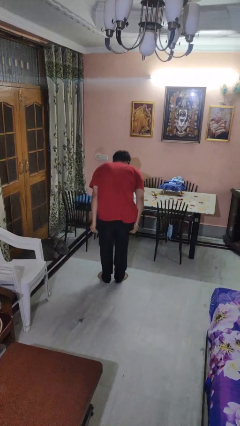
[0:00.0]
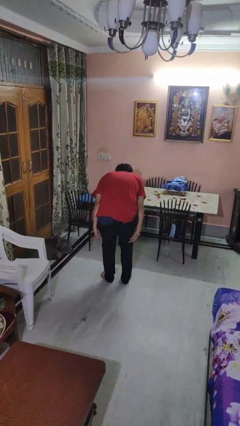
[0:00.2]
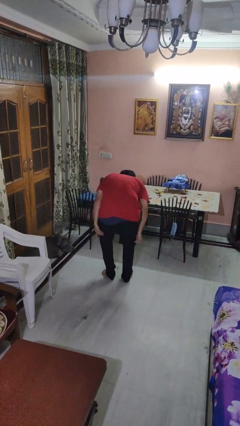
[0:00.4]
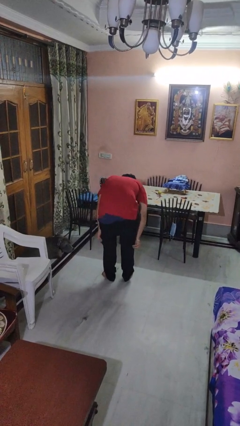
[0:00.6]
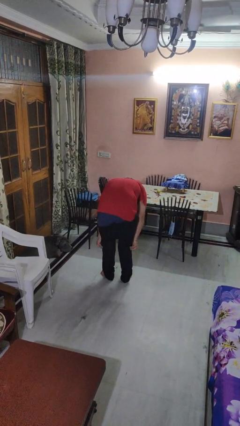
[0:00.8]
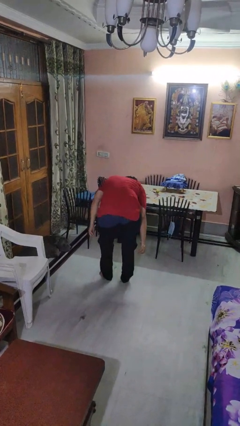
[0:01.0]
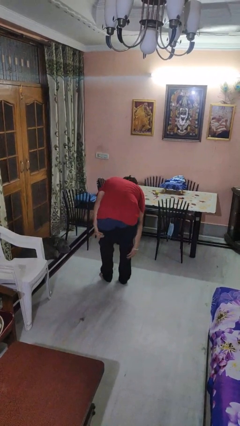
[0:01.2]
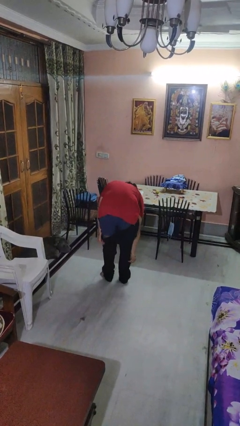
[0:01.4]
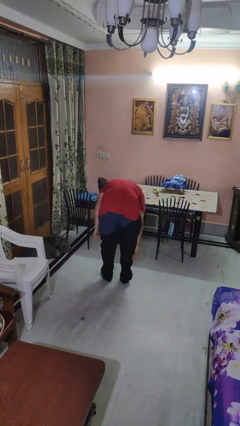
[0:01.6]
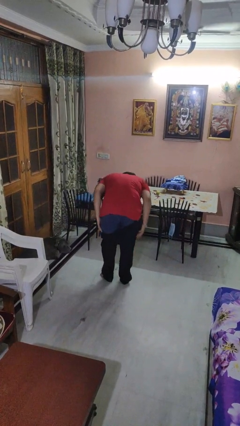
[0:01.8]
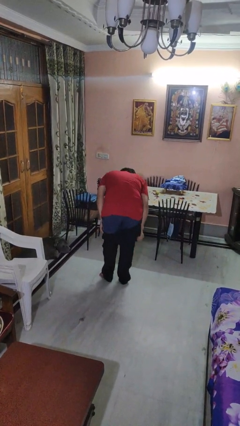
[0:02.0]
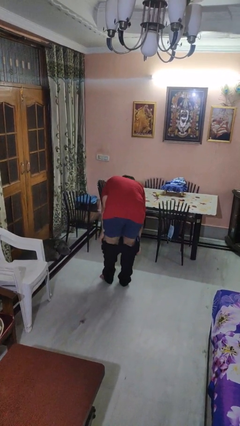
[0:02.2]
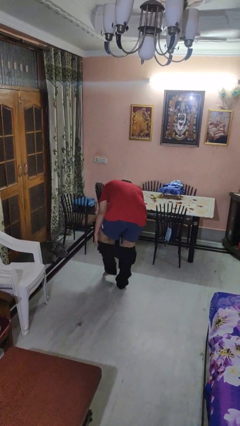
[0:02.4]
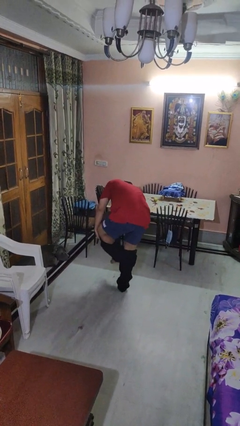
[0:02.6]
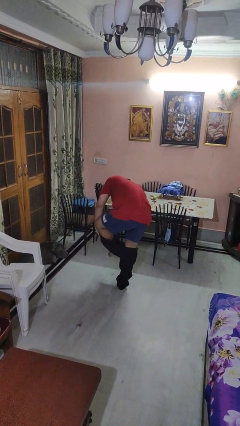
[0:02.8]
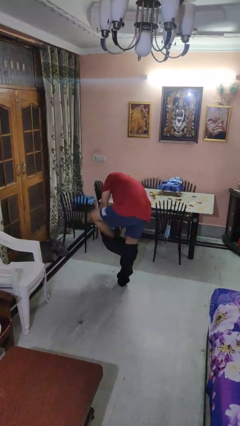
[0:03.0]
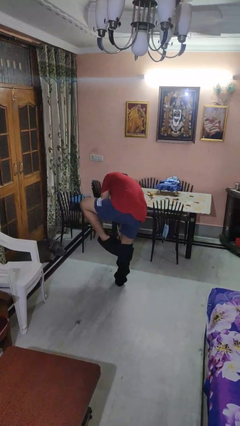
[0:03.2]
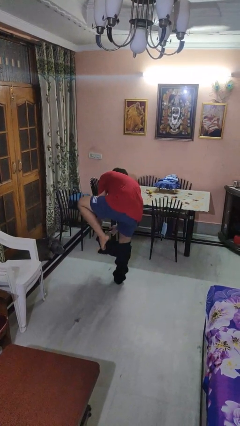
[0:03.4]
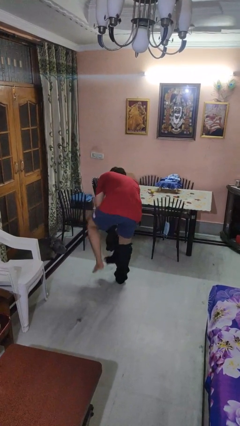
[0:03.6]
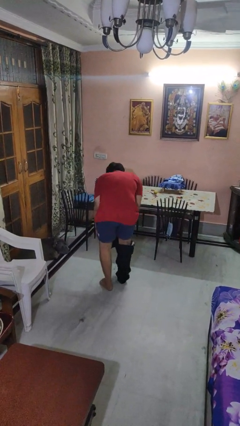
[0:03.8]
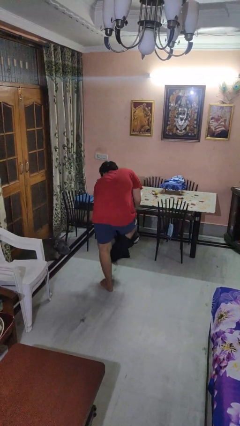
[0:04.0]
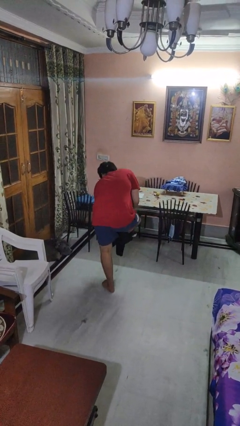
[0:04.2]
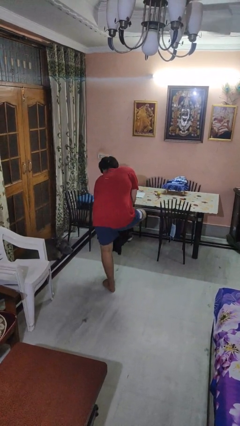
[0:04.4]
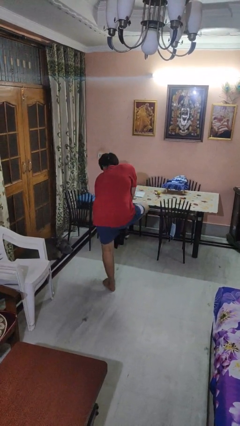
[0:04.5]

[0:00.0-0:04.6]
person takes off pants

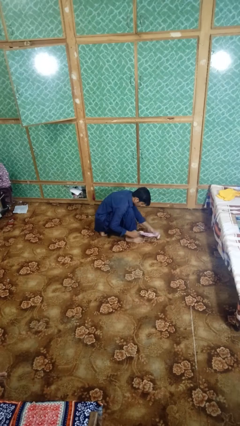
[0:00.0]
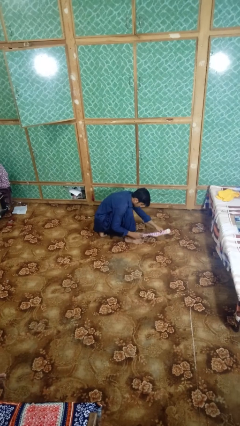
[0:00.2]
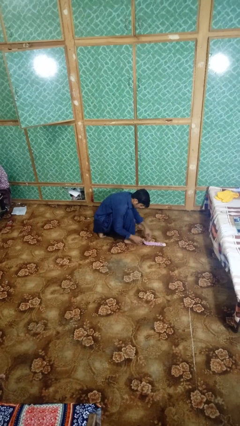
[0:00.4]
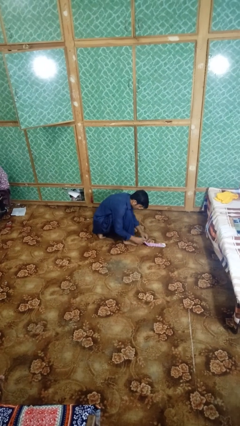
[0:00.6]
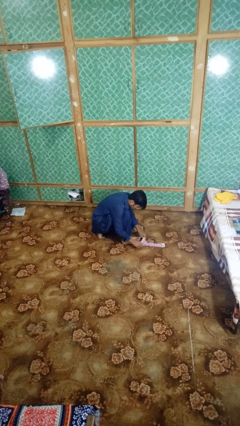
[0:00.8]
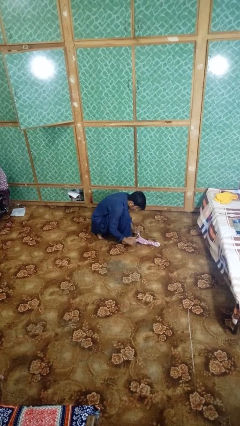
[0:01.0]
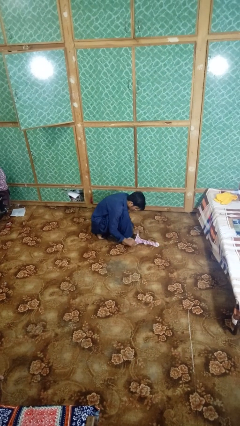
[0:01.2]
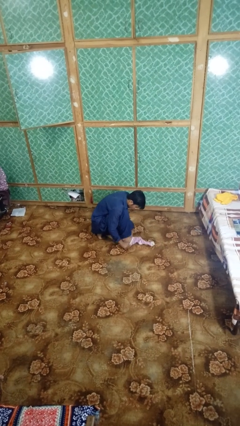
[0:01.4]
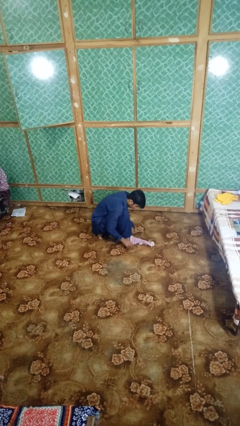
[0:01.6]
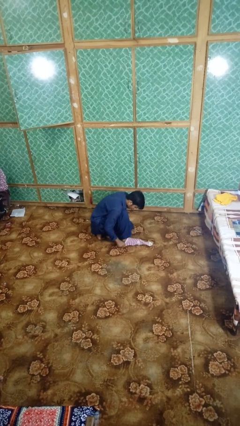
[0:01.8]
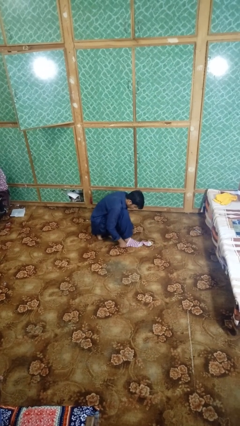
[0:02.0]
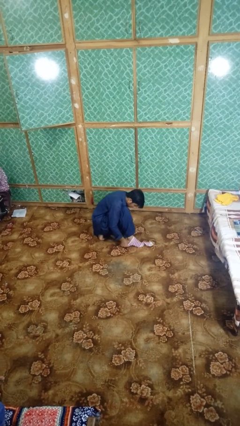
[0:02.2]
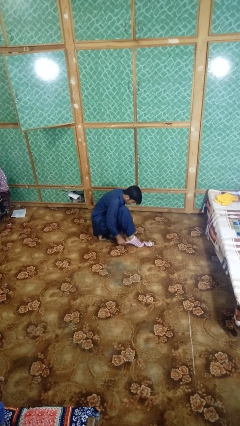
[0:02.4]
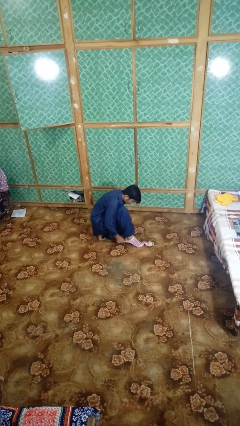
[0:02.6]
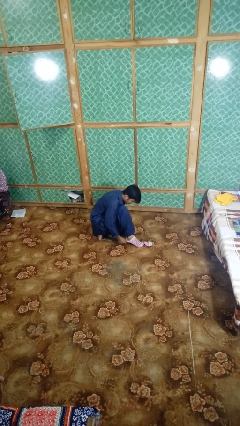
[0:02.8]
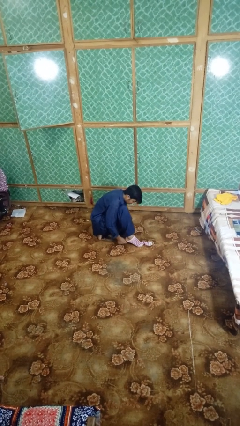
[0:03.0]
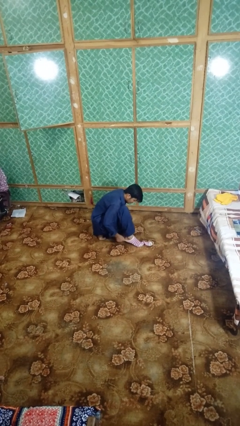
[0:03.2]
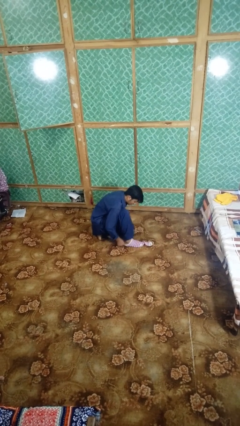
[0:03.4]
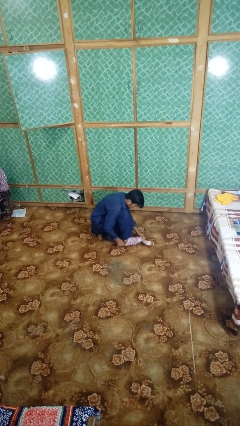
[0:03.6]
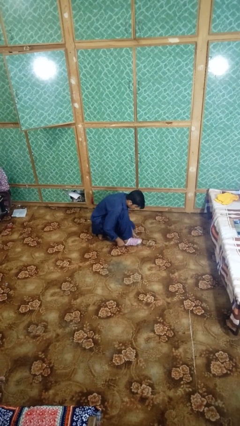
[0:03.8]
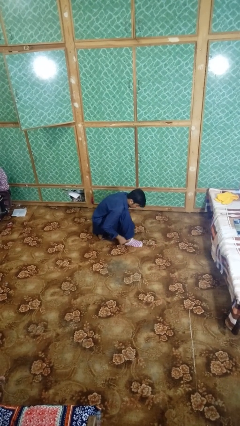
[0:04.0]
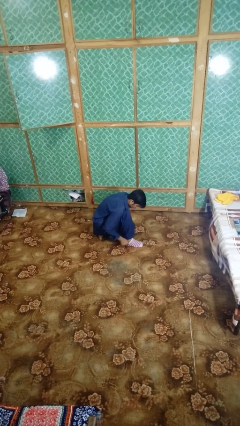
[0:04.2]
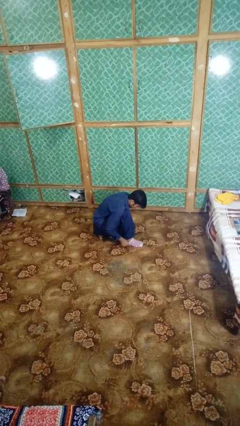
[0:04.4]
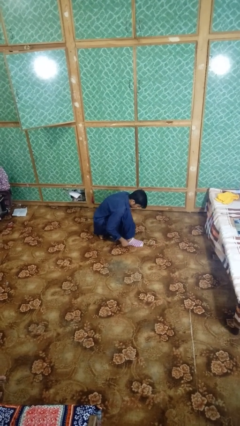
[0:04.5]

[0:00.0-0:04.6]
person puts on socks

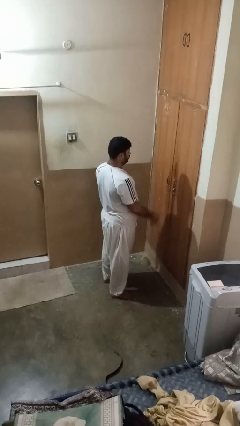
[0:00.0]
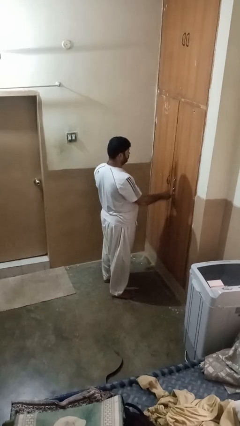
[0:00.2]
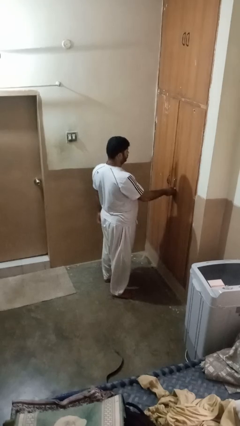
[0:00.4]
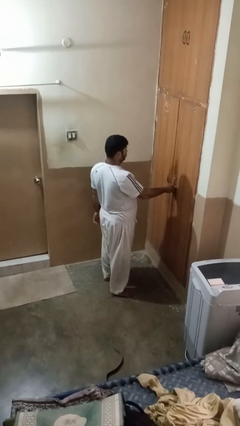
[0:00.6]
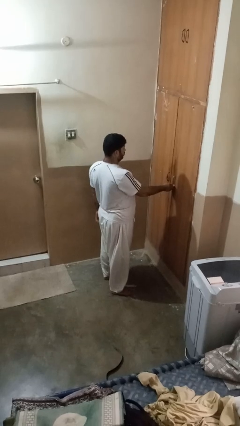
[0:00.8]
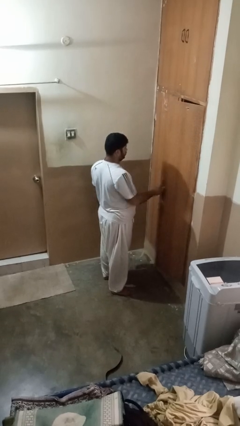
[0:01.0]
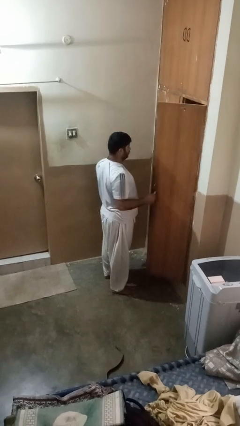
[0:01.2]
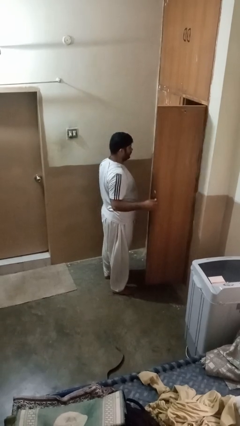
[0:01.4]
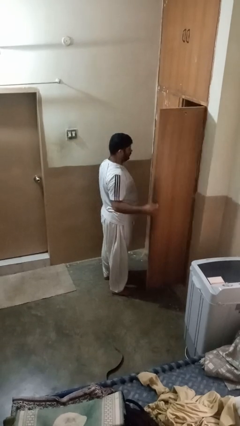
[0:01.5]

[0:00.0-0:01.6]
person opens closet door

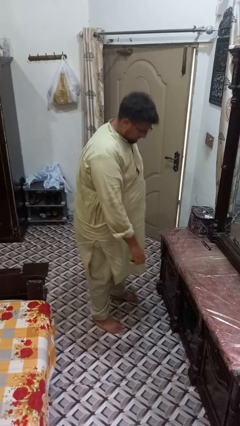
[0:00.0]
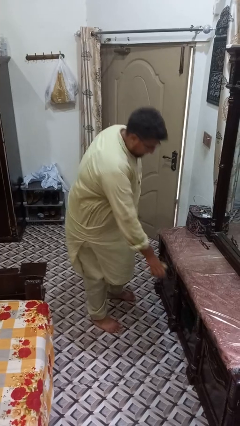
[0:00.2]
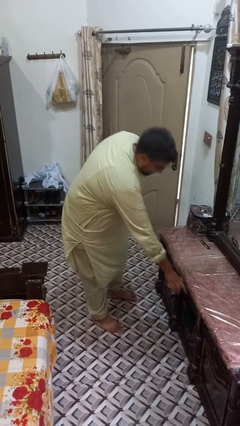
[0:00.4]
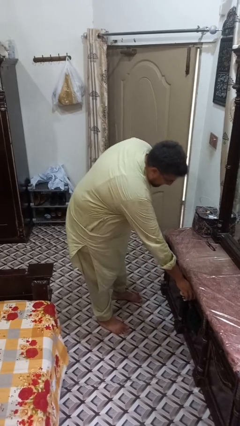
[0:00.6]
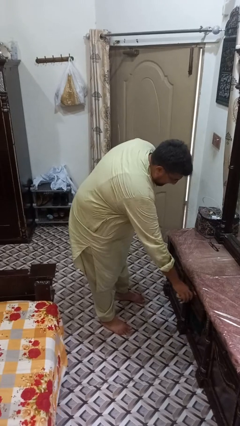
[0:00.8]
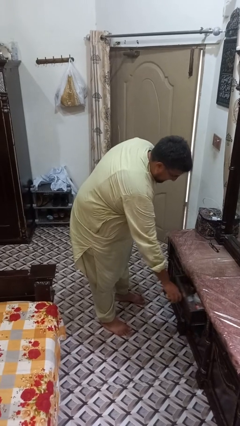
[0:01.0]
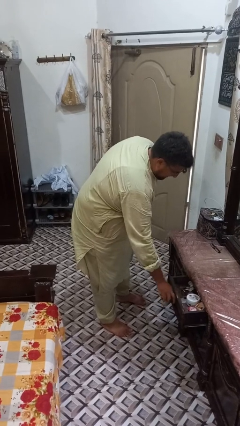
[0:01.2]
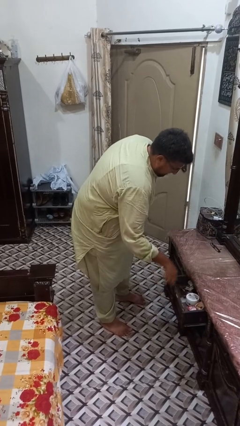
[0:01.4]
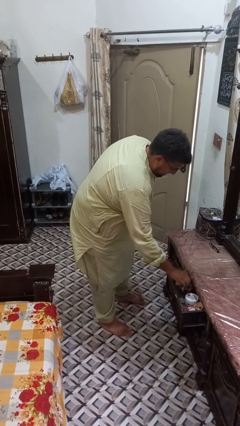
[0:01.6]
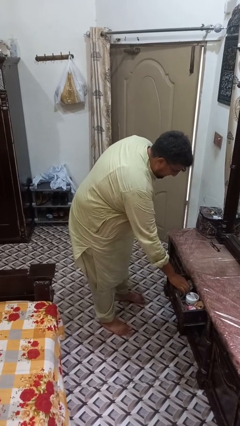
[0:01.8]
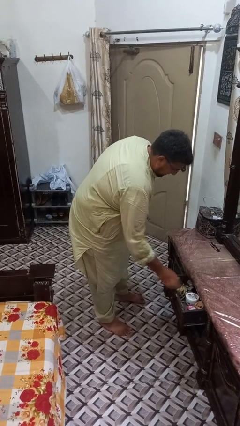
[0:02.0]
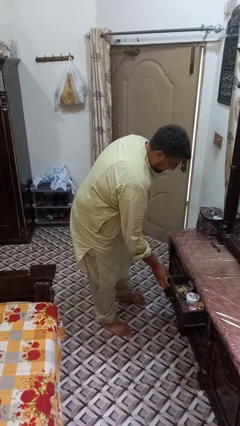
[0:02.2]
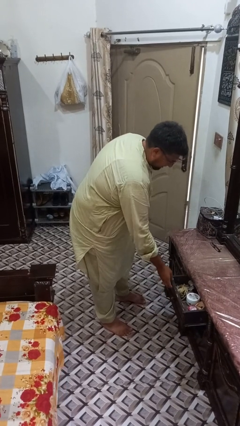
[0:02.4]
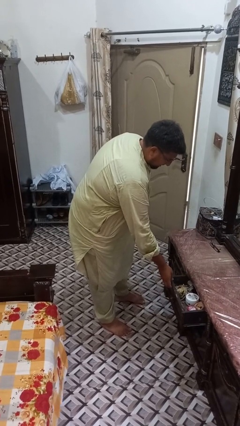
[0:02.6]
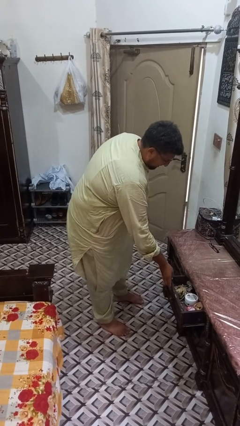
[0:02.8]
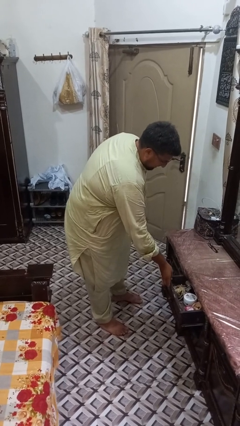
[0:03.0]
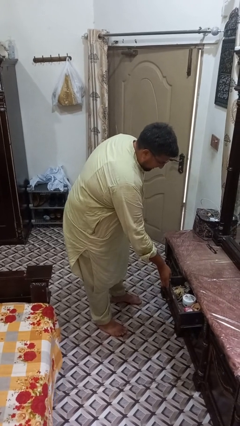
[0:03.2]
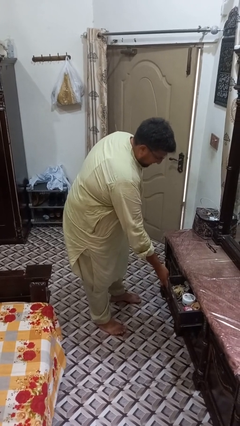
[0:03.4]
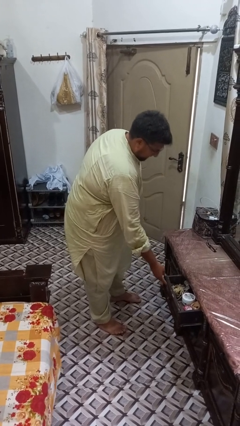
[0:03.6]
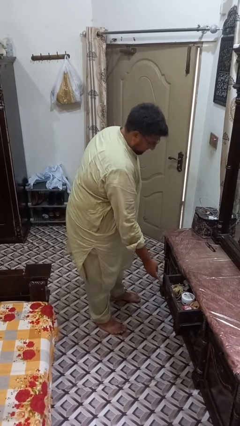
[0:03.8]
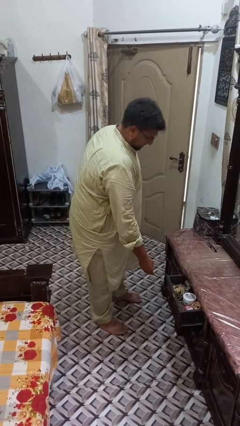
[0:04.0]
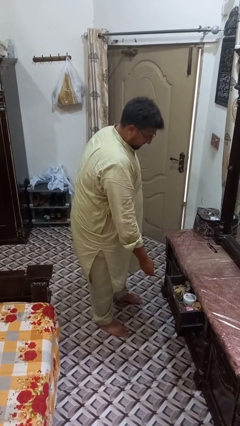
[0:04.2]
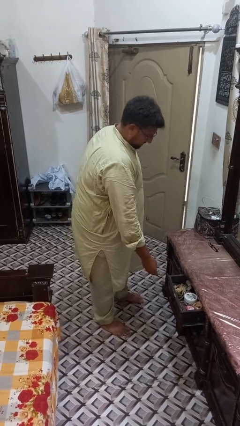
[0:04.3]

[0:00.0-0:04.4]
person puts clothes into dresser

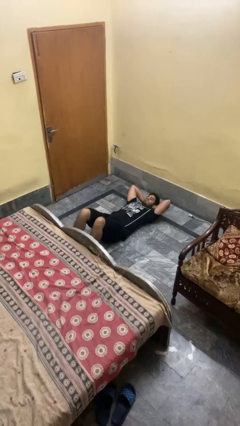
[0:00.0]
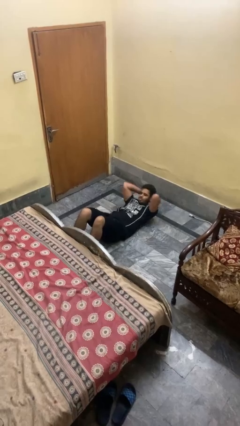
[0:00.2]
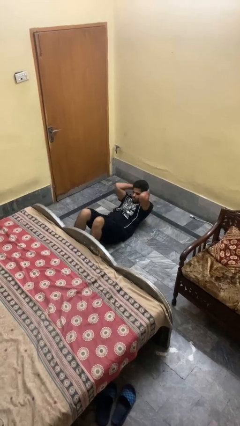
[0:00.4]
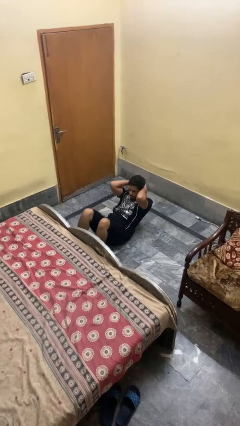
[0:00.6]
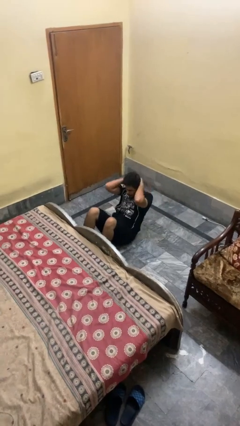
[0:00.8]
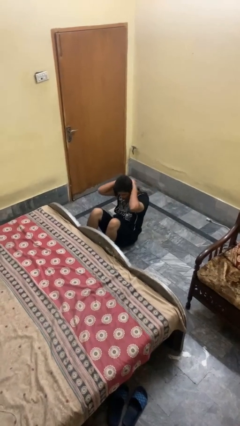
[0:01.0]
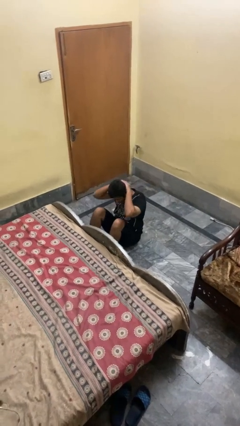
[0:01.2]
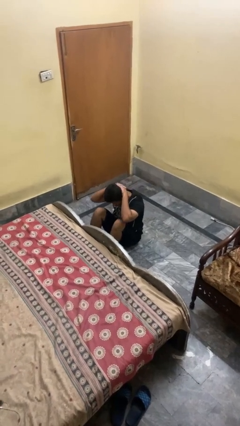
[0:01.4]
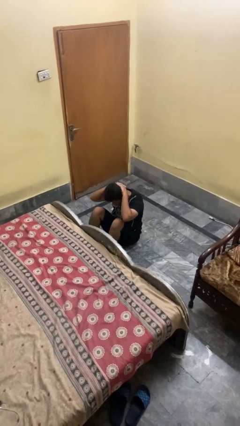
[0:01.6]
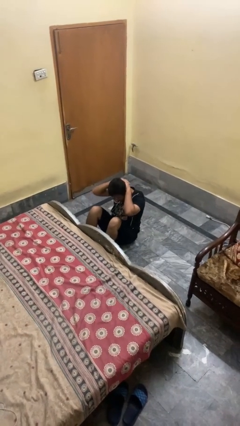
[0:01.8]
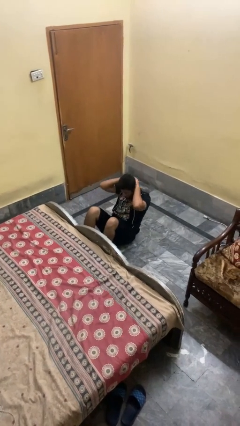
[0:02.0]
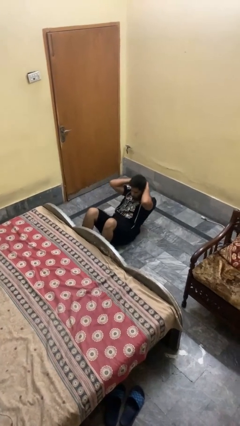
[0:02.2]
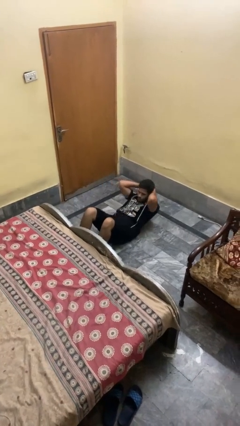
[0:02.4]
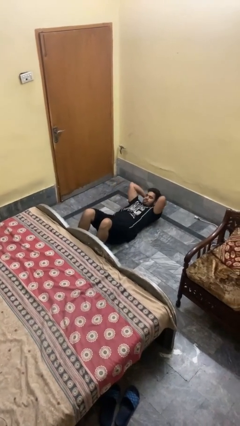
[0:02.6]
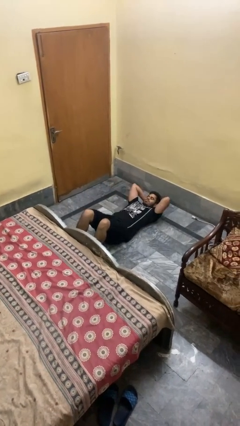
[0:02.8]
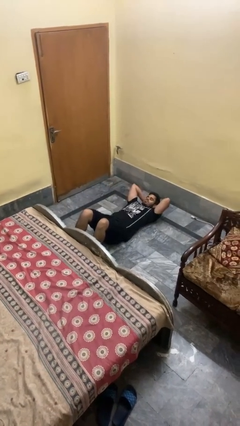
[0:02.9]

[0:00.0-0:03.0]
person exercises with situp
